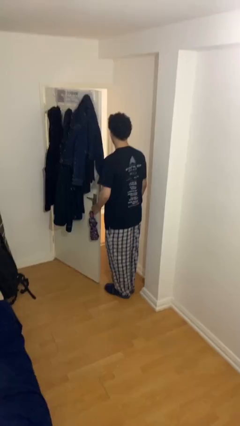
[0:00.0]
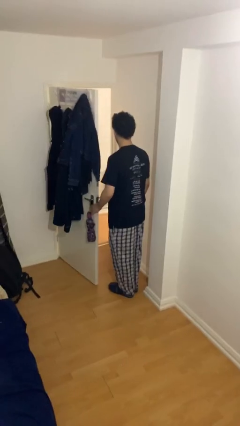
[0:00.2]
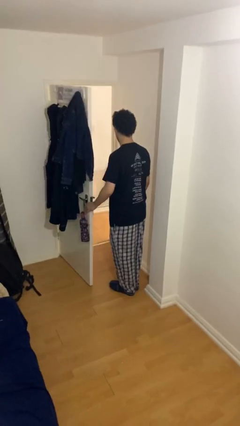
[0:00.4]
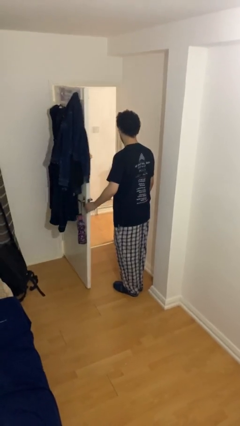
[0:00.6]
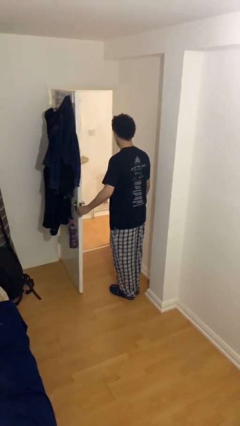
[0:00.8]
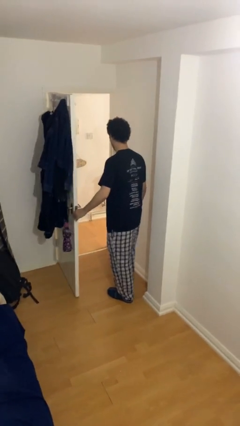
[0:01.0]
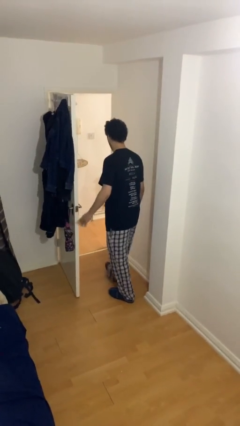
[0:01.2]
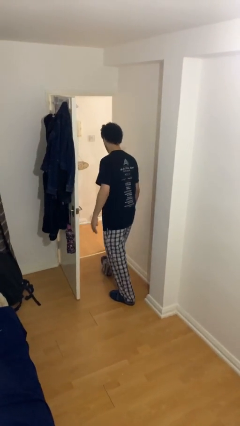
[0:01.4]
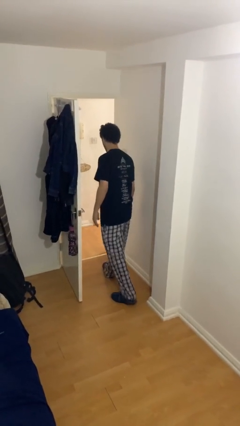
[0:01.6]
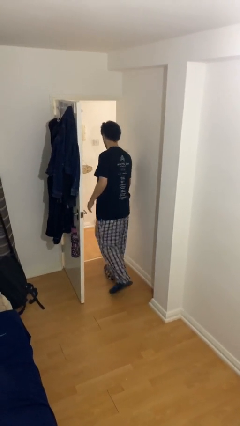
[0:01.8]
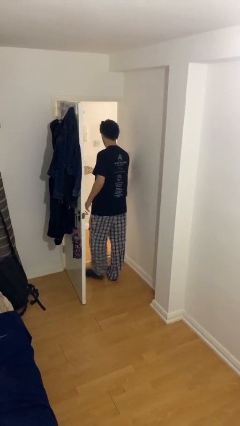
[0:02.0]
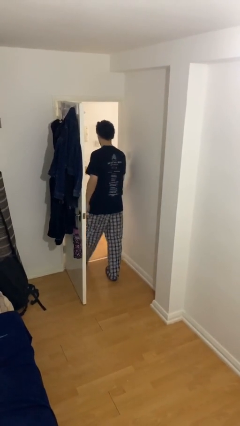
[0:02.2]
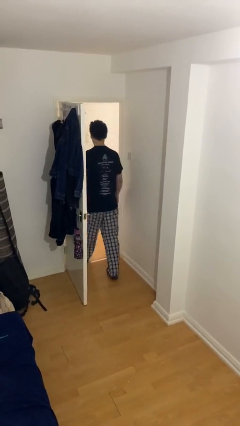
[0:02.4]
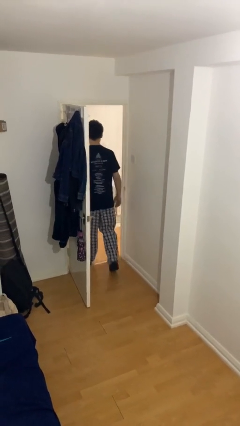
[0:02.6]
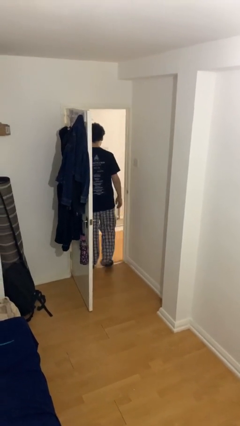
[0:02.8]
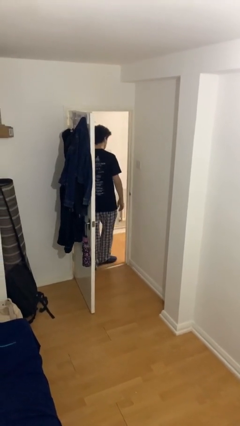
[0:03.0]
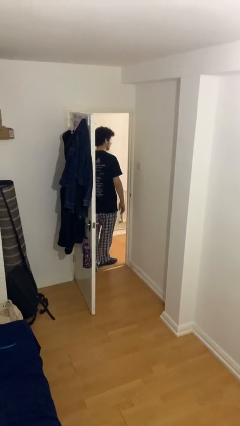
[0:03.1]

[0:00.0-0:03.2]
person exits scene through structure

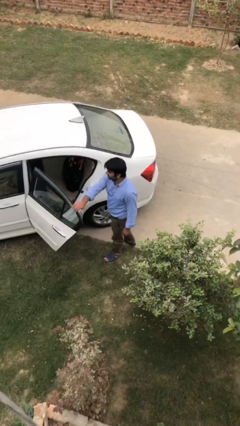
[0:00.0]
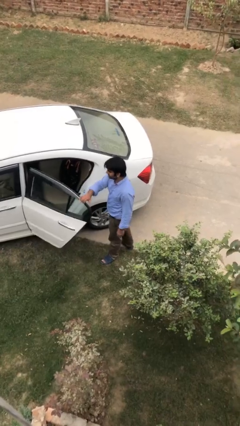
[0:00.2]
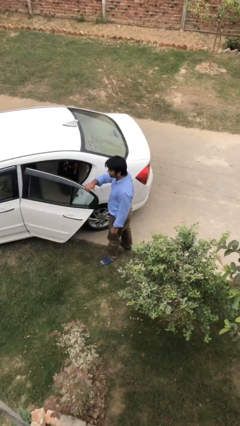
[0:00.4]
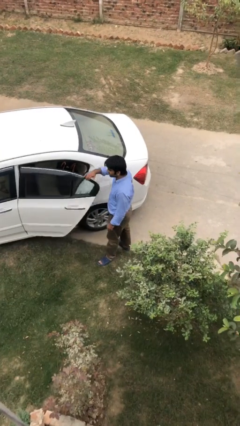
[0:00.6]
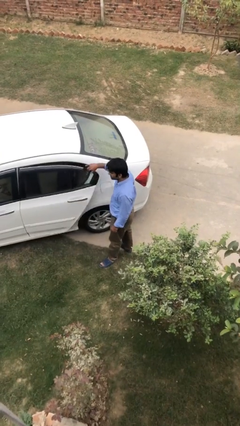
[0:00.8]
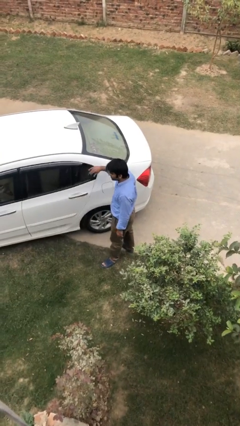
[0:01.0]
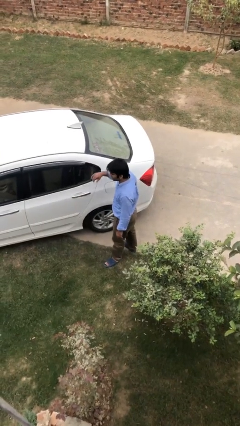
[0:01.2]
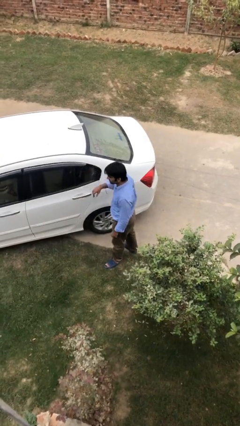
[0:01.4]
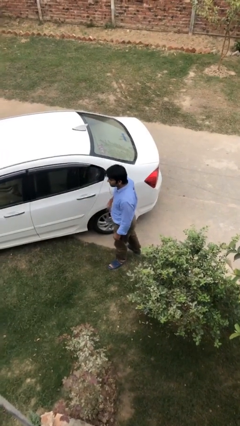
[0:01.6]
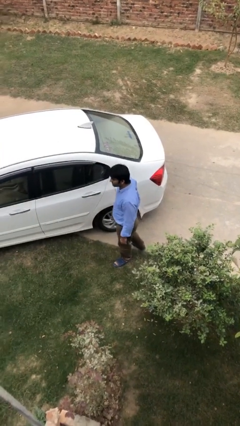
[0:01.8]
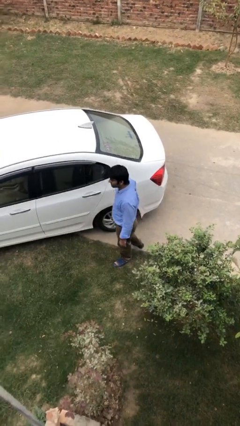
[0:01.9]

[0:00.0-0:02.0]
person closes car door

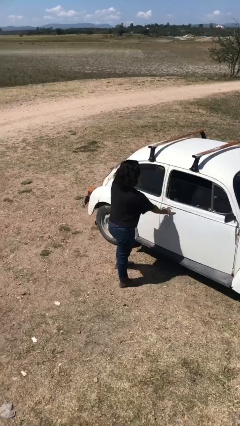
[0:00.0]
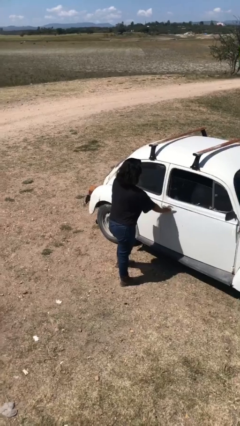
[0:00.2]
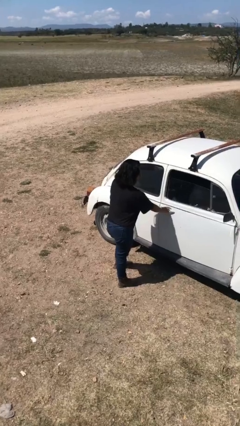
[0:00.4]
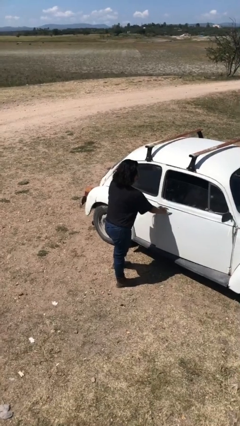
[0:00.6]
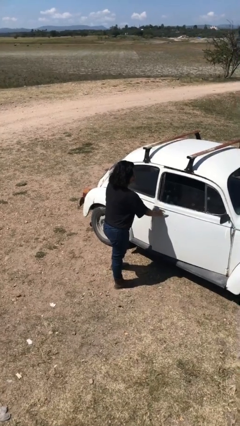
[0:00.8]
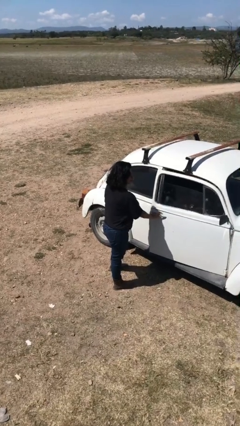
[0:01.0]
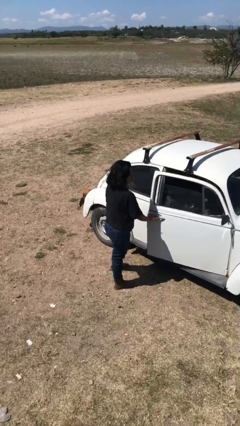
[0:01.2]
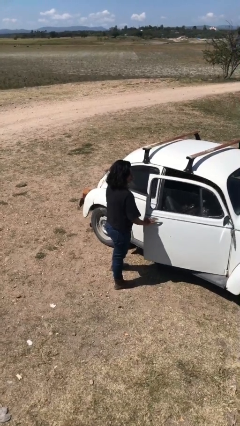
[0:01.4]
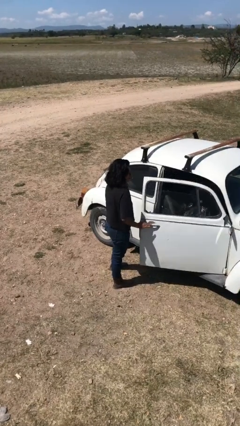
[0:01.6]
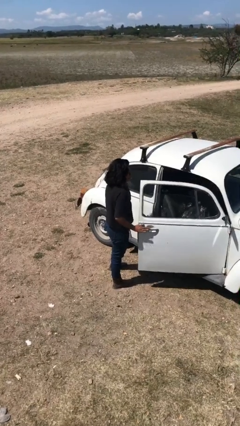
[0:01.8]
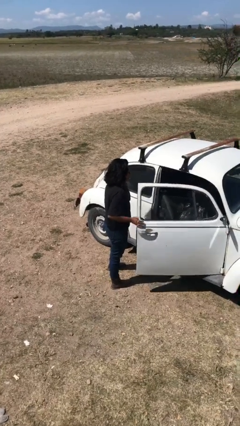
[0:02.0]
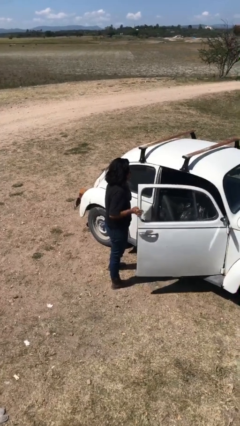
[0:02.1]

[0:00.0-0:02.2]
person opens car door

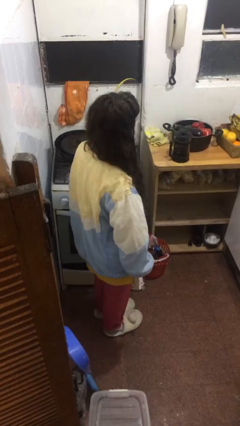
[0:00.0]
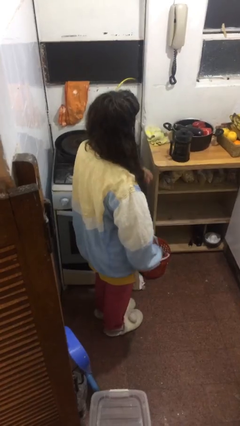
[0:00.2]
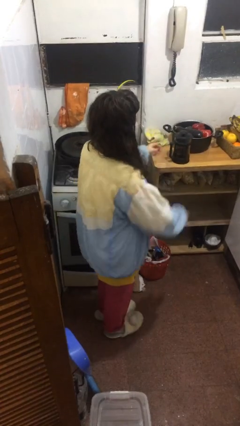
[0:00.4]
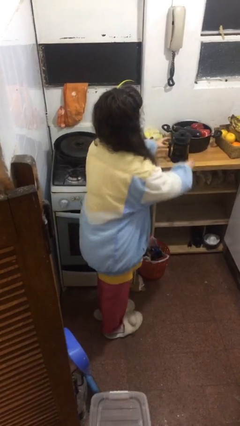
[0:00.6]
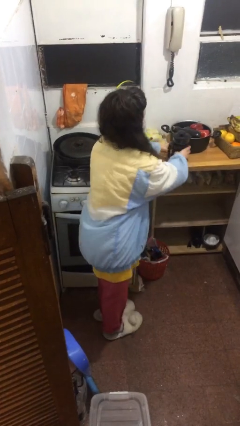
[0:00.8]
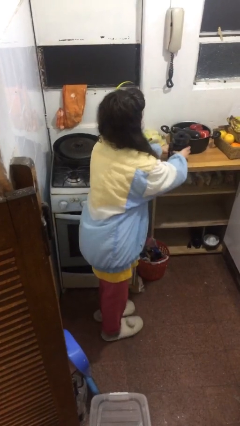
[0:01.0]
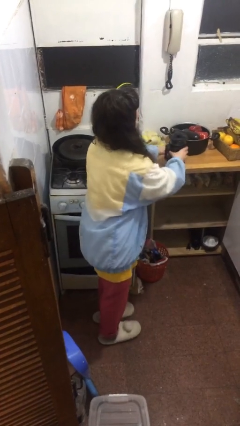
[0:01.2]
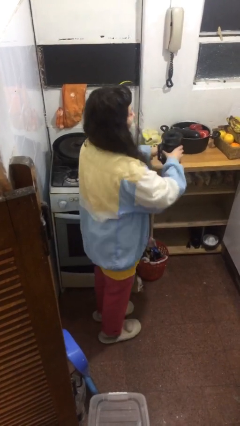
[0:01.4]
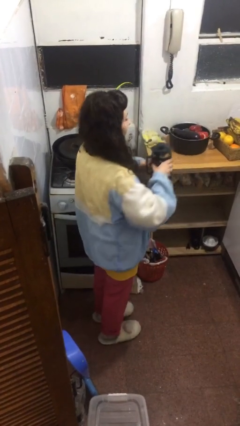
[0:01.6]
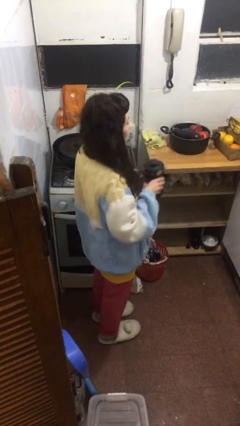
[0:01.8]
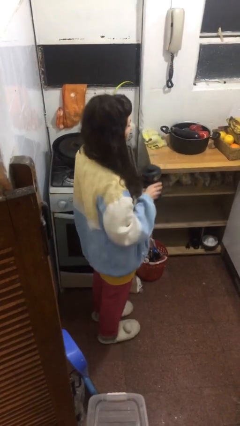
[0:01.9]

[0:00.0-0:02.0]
person picks up object from countertop

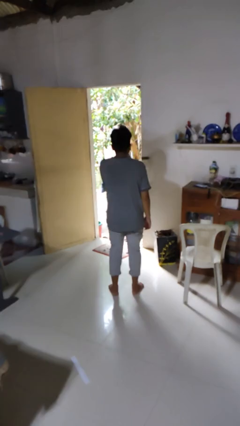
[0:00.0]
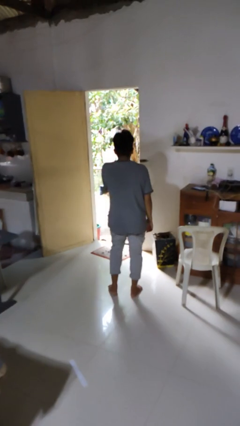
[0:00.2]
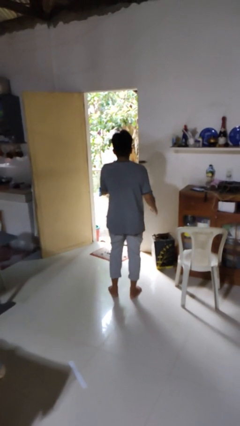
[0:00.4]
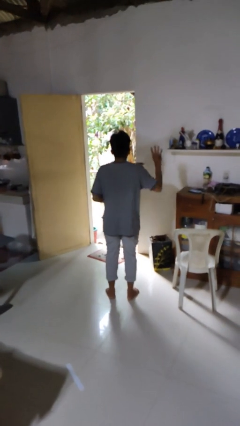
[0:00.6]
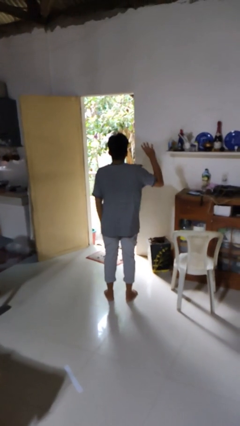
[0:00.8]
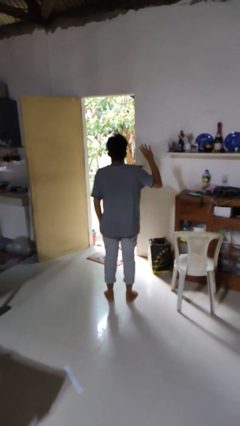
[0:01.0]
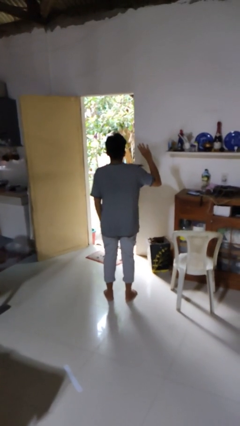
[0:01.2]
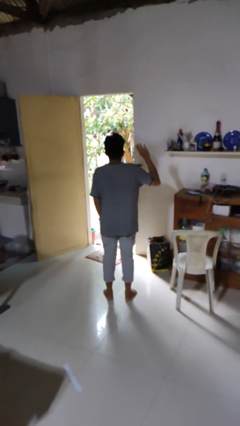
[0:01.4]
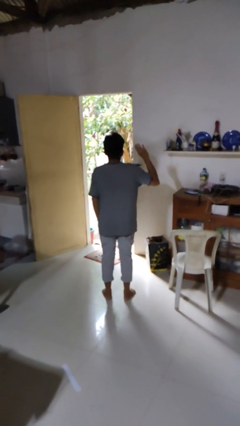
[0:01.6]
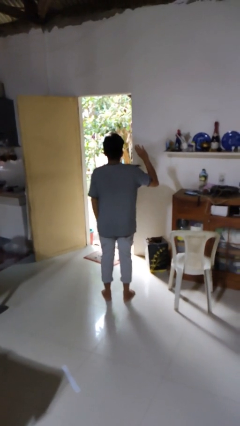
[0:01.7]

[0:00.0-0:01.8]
person gestures number four

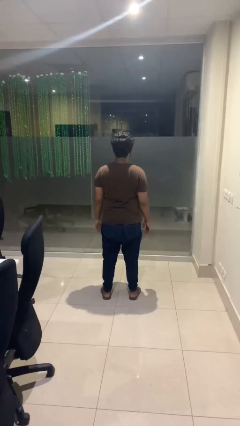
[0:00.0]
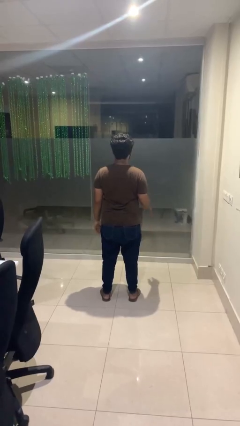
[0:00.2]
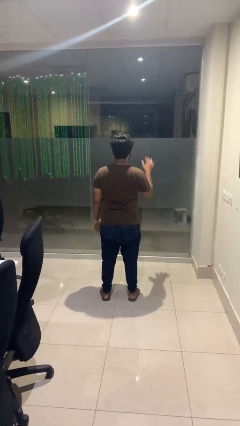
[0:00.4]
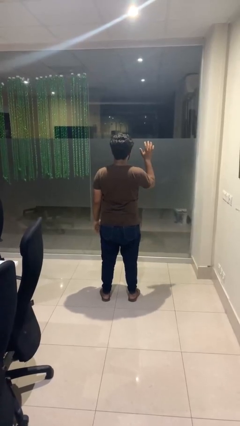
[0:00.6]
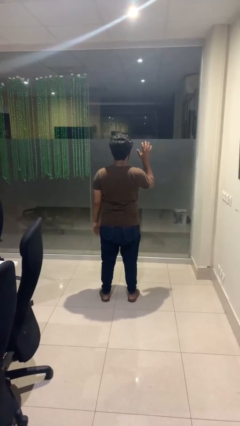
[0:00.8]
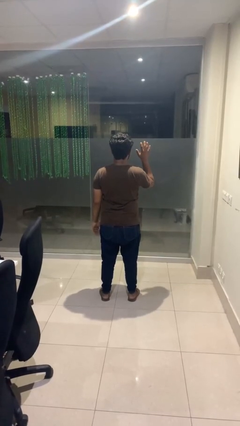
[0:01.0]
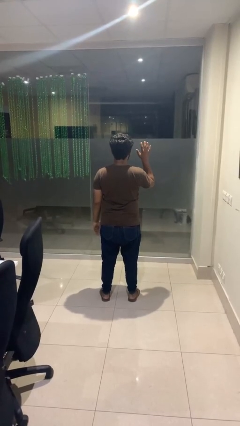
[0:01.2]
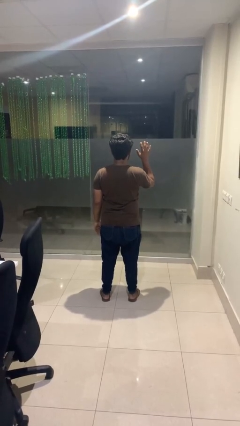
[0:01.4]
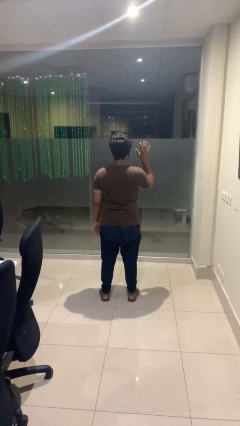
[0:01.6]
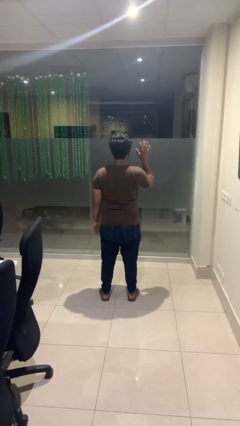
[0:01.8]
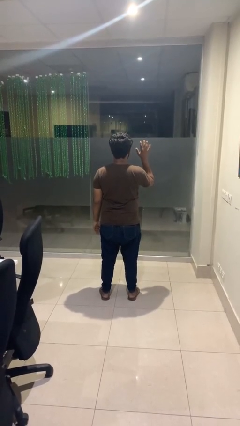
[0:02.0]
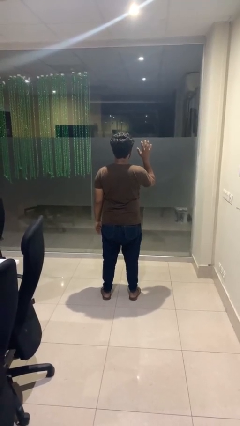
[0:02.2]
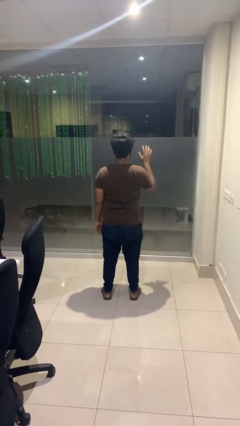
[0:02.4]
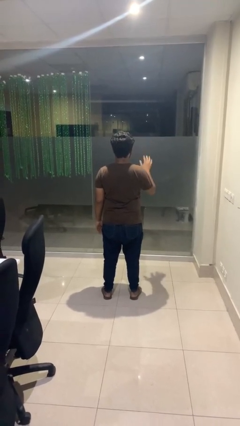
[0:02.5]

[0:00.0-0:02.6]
person gestures number five

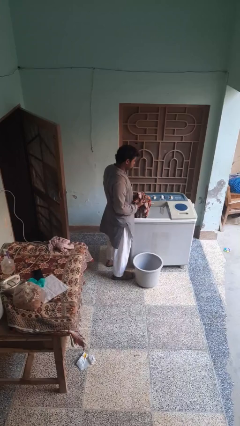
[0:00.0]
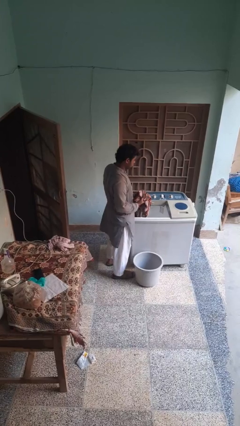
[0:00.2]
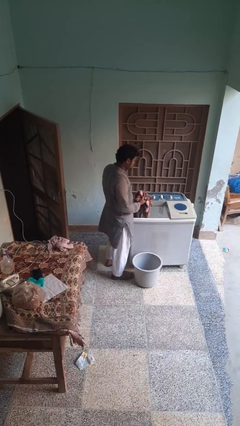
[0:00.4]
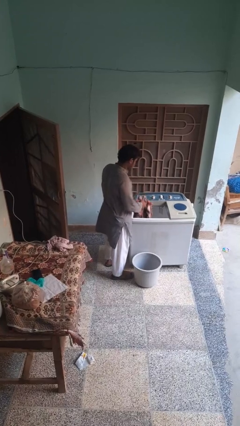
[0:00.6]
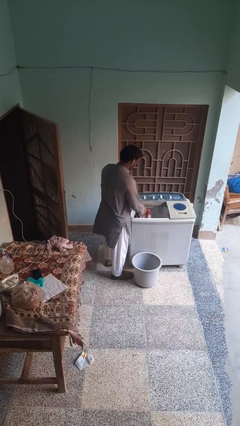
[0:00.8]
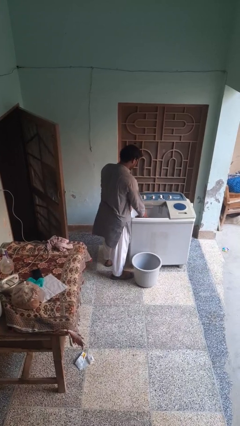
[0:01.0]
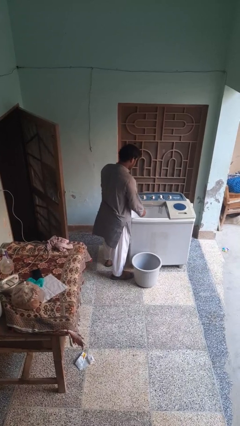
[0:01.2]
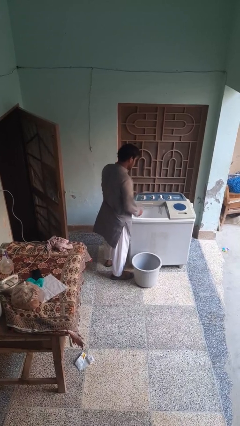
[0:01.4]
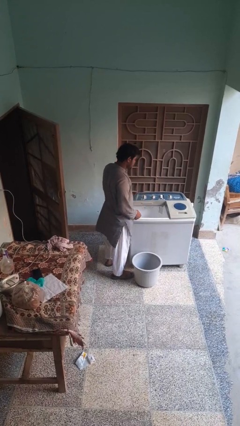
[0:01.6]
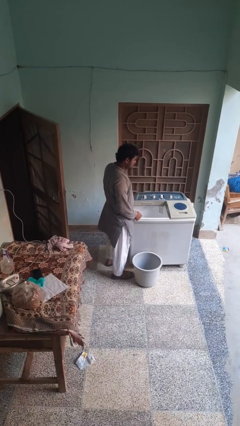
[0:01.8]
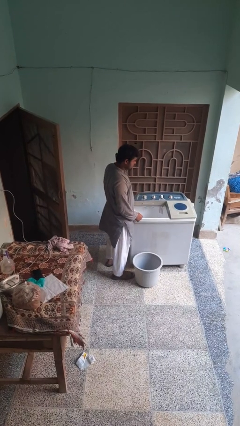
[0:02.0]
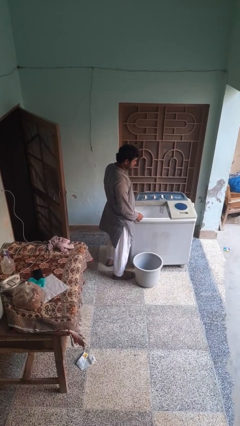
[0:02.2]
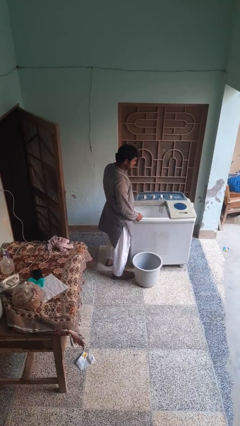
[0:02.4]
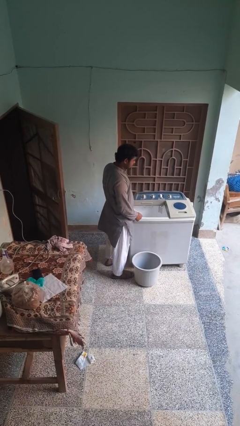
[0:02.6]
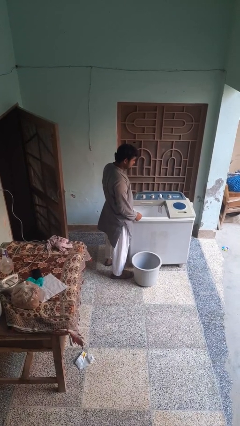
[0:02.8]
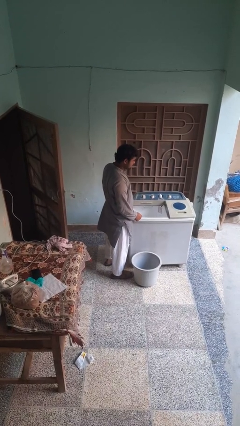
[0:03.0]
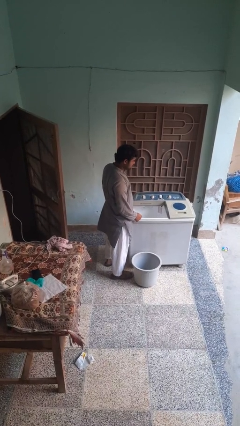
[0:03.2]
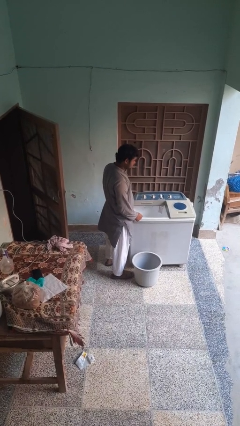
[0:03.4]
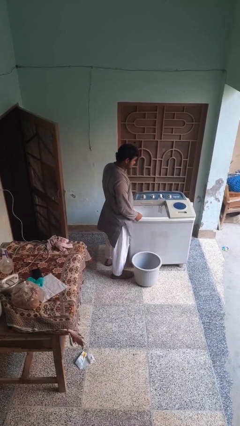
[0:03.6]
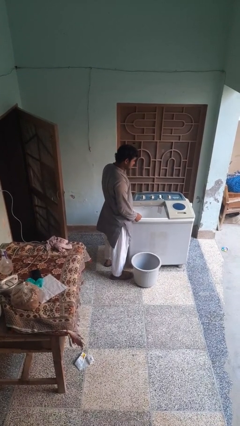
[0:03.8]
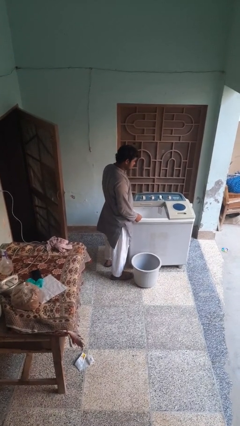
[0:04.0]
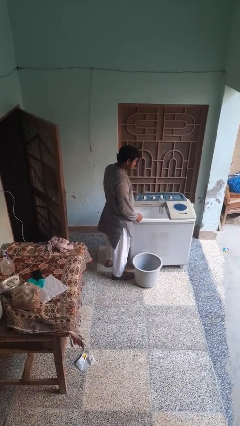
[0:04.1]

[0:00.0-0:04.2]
person loads clotheswasher
